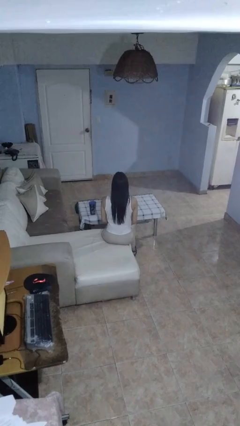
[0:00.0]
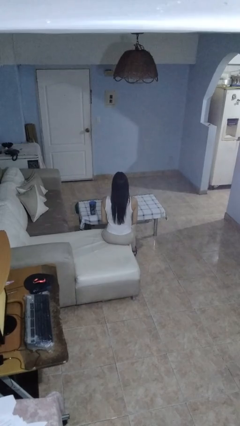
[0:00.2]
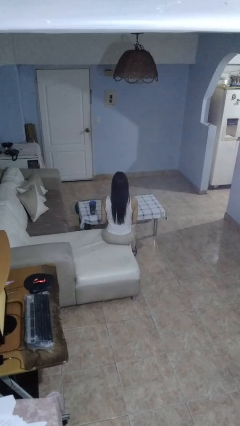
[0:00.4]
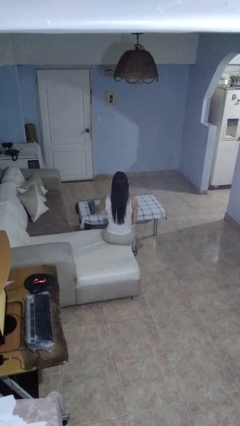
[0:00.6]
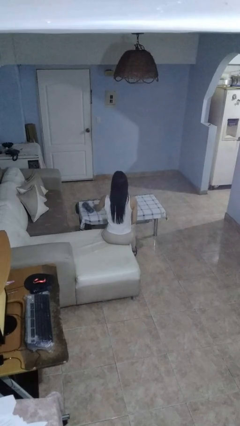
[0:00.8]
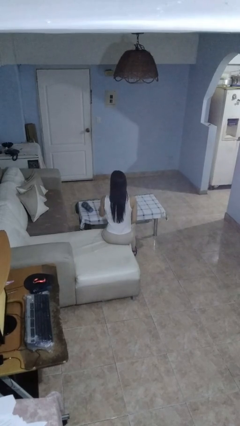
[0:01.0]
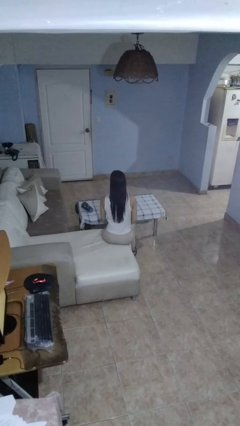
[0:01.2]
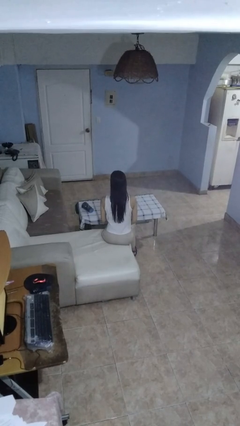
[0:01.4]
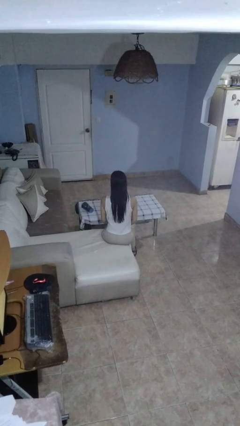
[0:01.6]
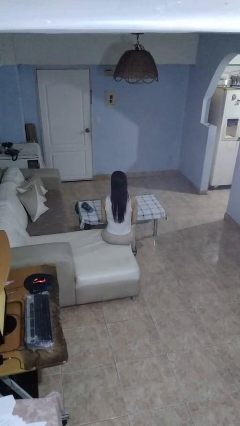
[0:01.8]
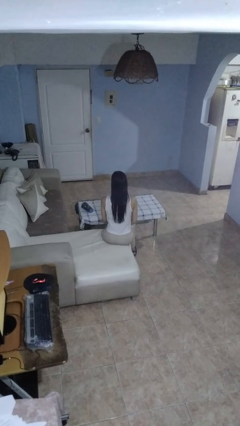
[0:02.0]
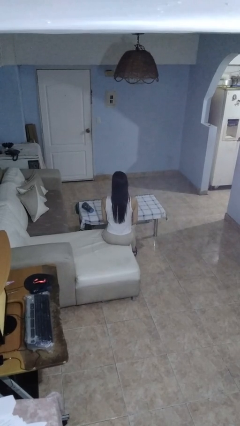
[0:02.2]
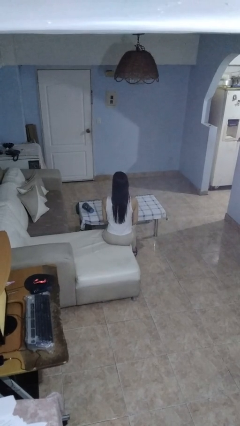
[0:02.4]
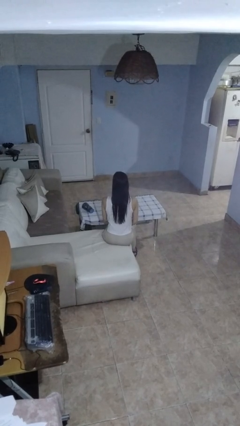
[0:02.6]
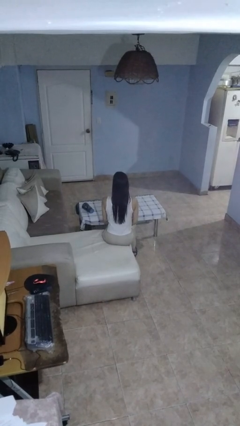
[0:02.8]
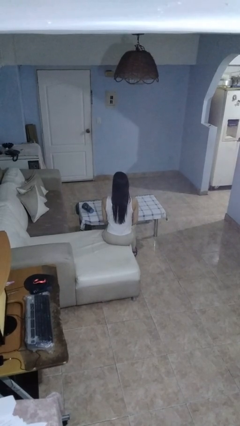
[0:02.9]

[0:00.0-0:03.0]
person knocks over glass

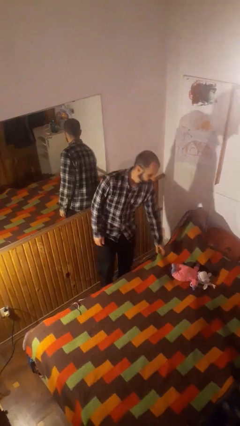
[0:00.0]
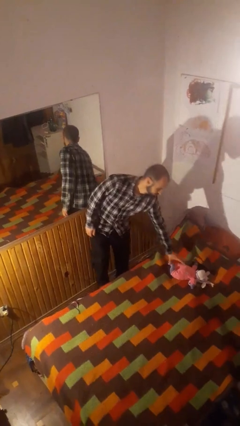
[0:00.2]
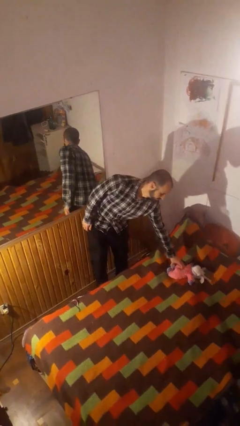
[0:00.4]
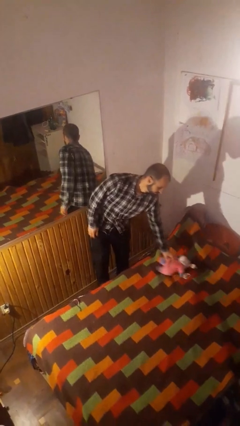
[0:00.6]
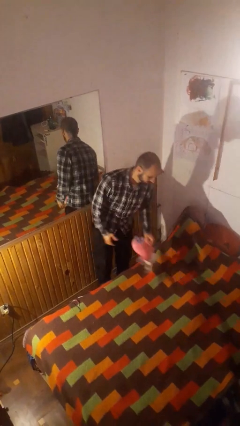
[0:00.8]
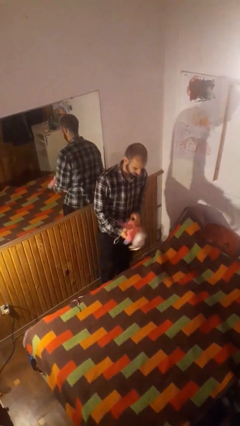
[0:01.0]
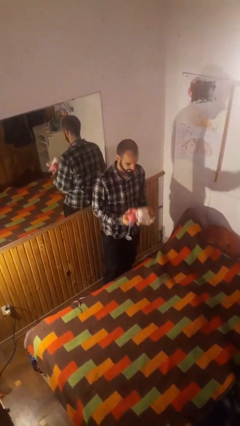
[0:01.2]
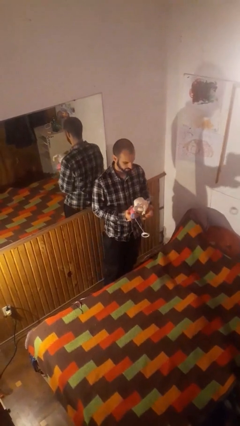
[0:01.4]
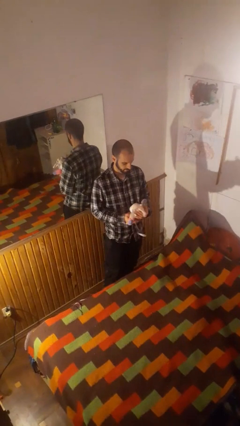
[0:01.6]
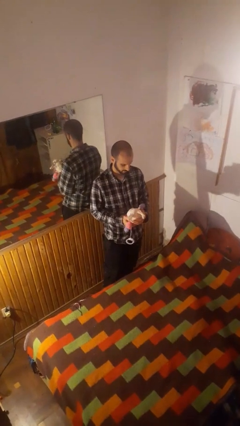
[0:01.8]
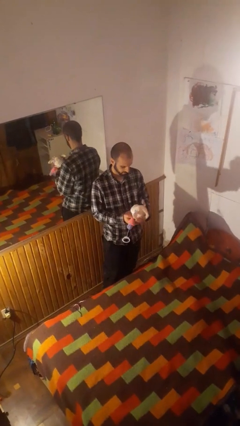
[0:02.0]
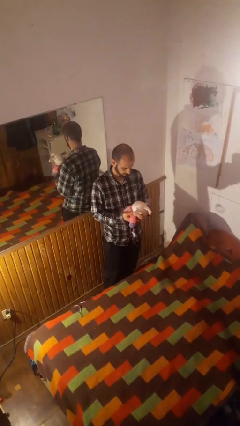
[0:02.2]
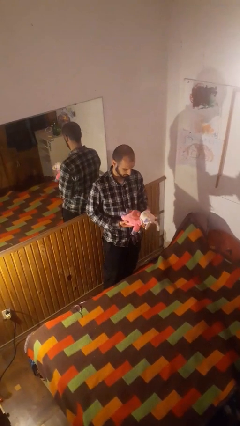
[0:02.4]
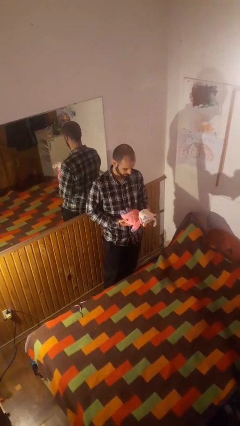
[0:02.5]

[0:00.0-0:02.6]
person picks up object from bed

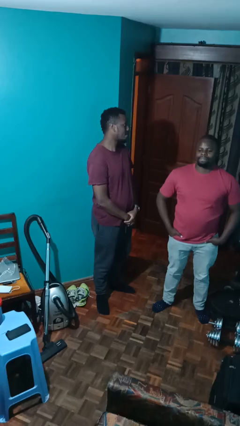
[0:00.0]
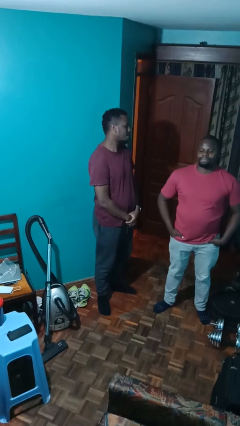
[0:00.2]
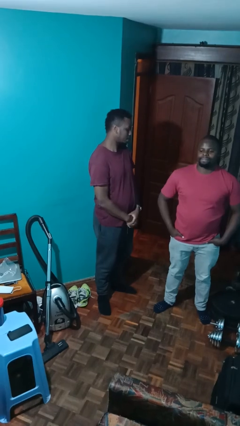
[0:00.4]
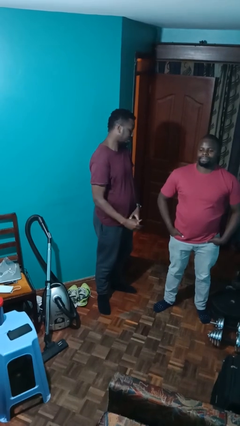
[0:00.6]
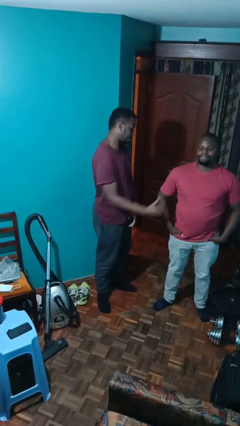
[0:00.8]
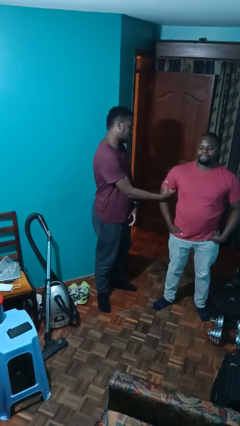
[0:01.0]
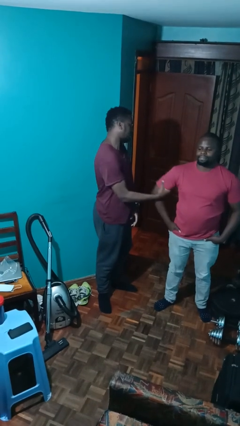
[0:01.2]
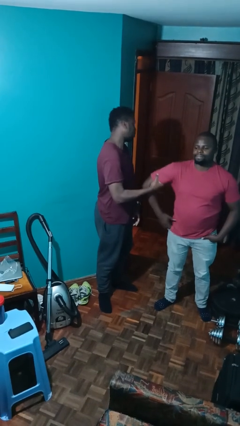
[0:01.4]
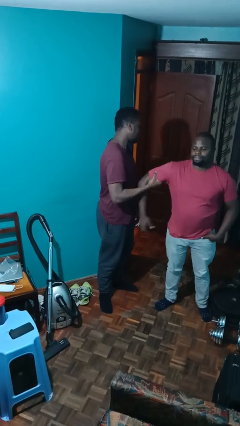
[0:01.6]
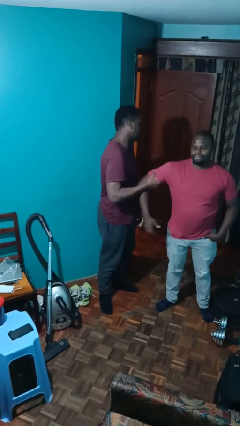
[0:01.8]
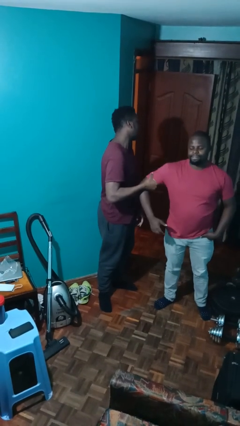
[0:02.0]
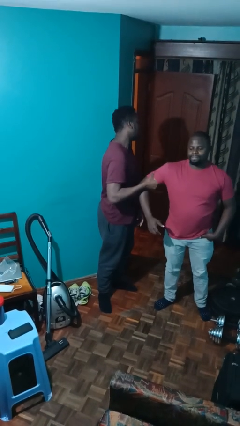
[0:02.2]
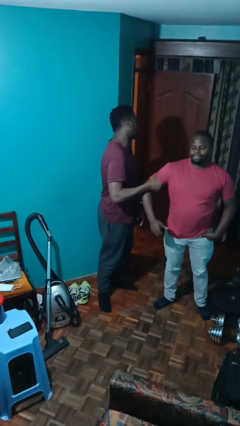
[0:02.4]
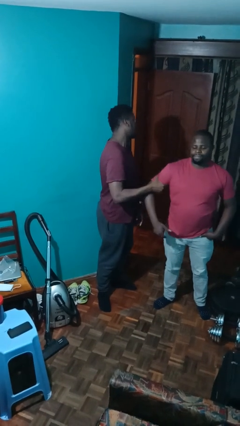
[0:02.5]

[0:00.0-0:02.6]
person grabs person by bicep

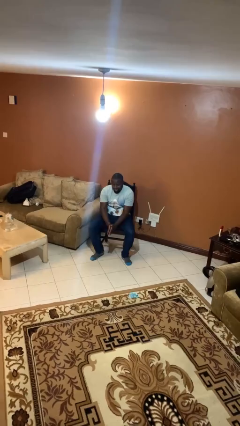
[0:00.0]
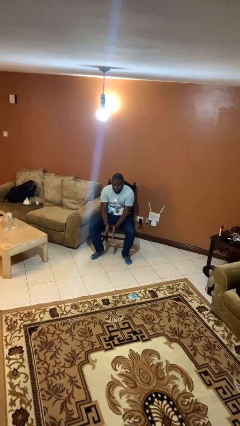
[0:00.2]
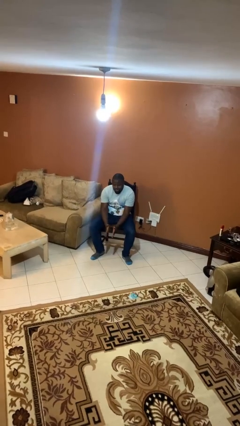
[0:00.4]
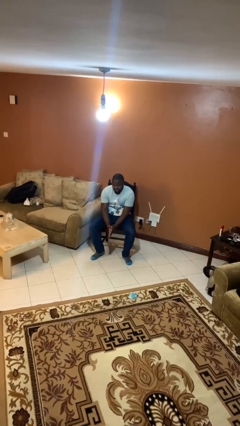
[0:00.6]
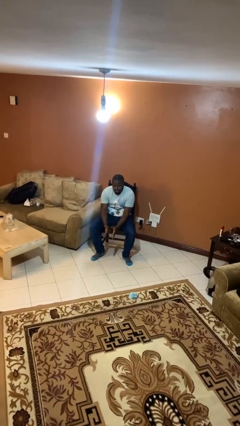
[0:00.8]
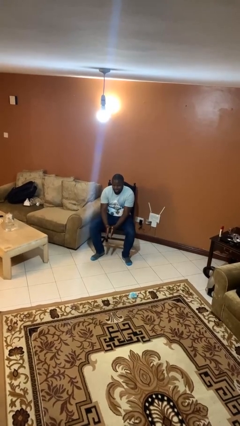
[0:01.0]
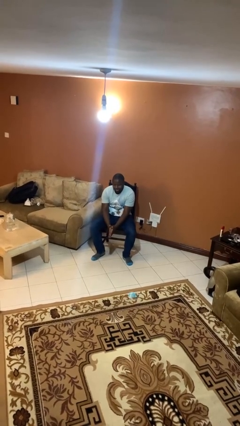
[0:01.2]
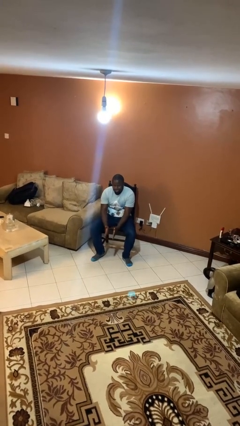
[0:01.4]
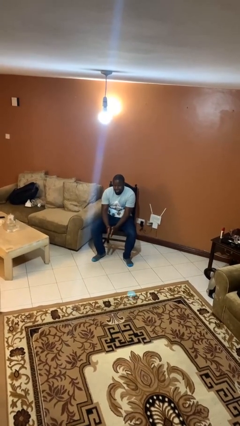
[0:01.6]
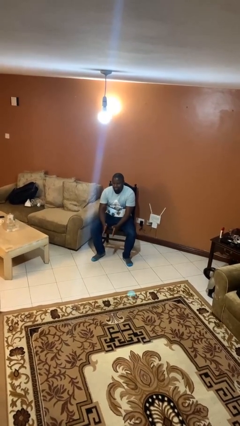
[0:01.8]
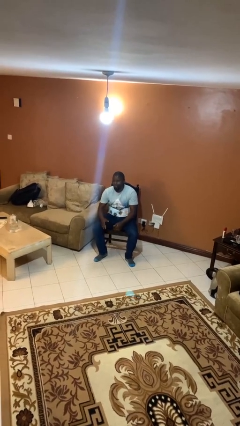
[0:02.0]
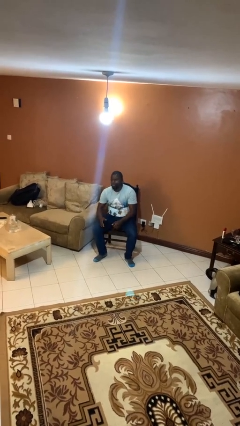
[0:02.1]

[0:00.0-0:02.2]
person claps hands

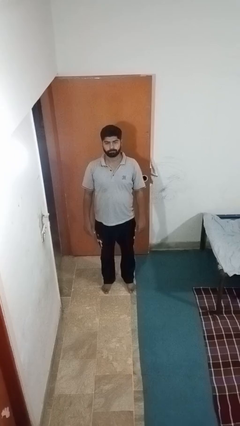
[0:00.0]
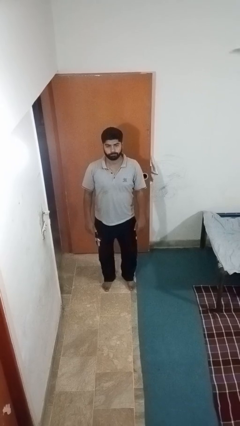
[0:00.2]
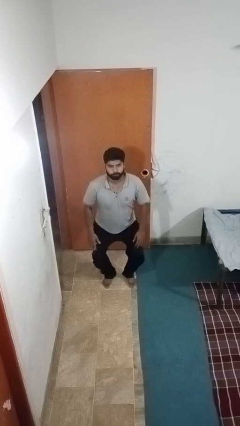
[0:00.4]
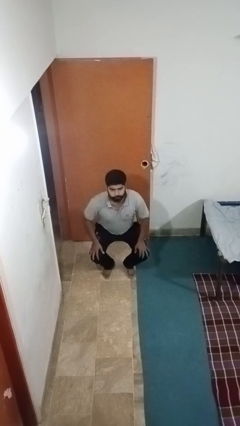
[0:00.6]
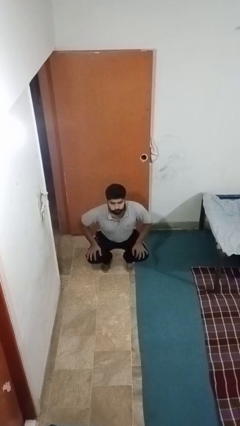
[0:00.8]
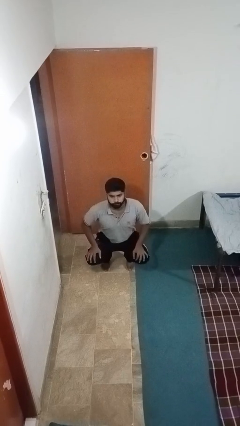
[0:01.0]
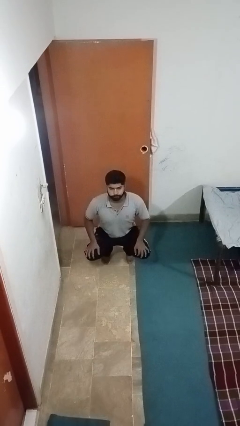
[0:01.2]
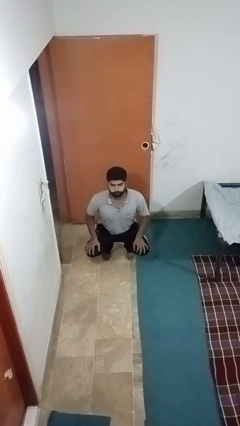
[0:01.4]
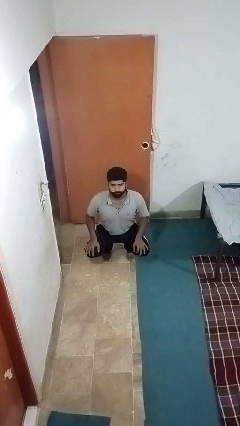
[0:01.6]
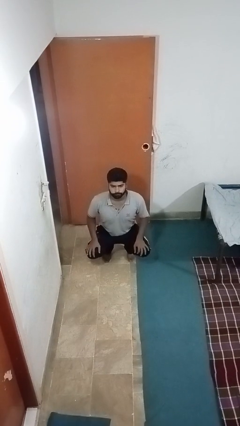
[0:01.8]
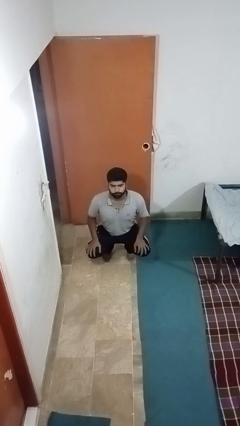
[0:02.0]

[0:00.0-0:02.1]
person squats

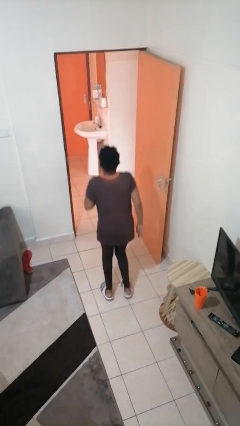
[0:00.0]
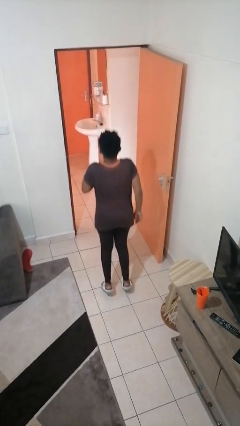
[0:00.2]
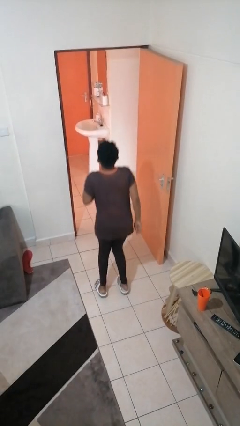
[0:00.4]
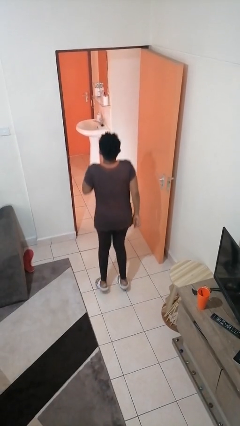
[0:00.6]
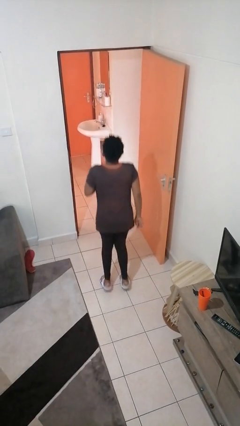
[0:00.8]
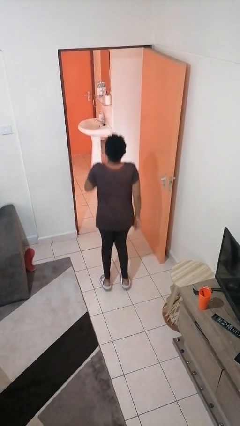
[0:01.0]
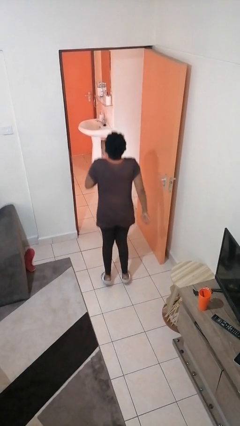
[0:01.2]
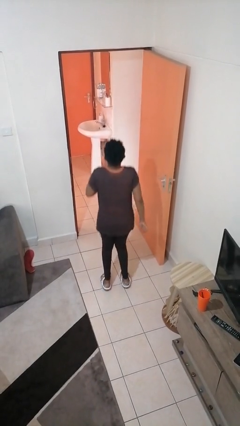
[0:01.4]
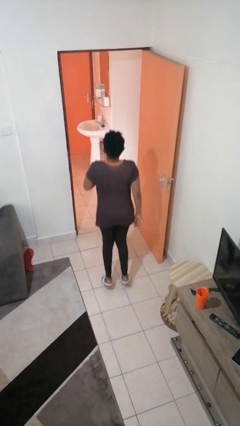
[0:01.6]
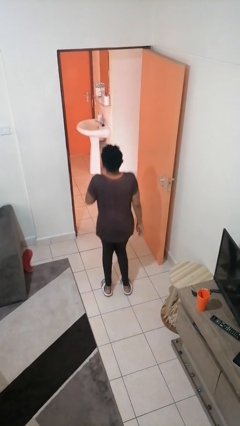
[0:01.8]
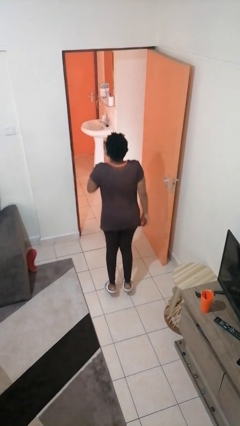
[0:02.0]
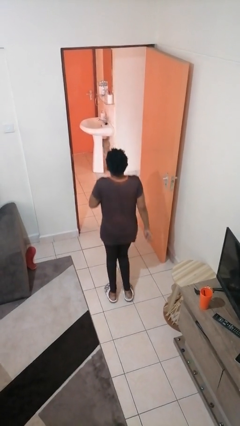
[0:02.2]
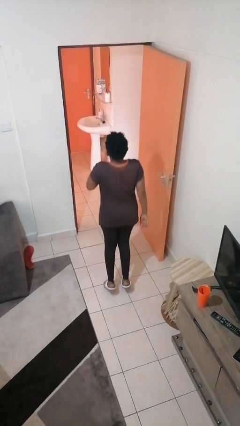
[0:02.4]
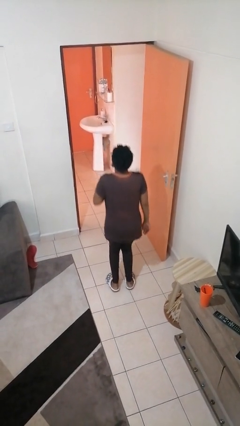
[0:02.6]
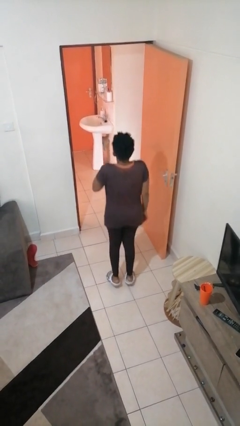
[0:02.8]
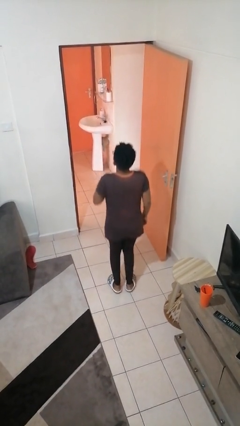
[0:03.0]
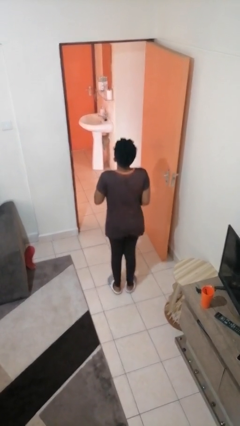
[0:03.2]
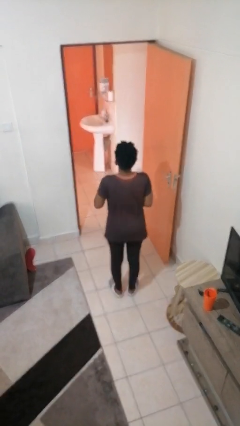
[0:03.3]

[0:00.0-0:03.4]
person jumps

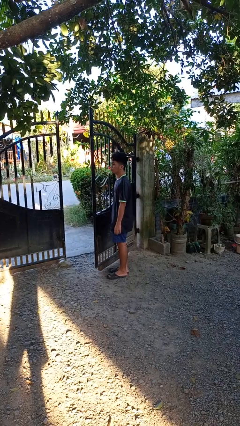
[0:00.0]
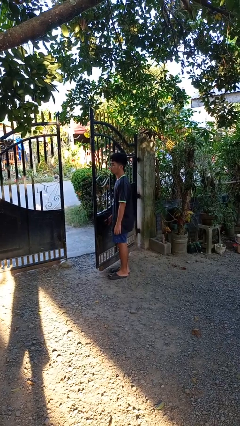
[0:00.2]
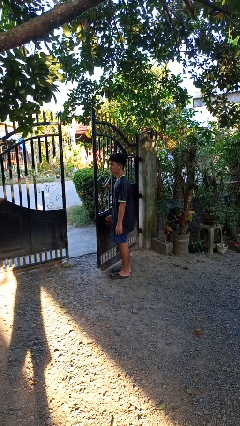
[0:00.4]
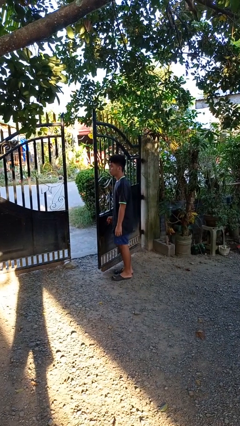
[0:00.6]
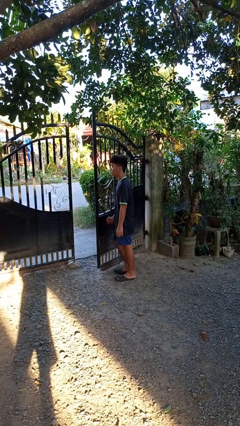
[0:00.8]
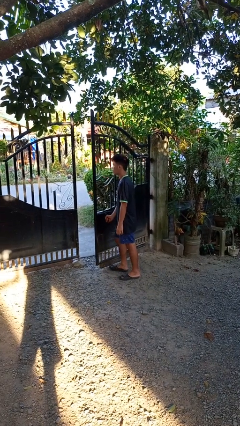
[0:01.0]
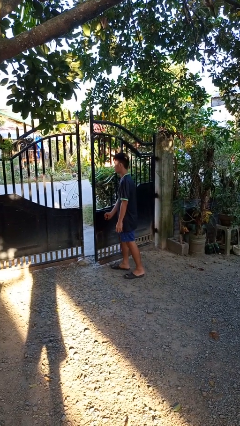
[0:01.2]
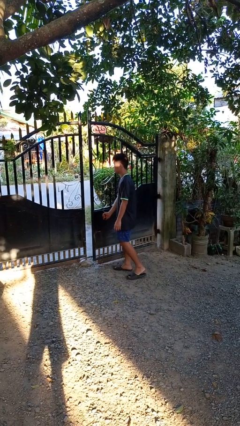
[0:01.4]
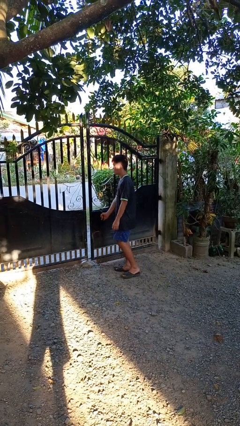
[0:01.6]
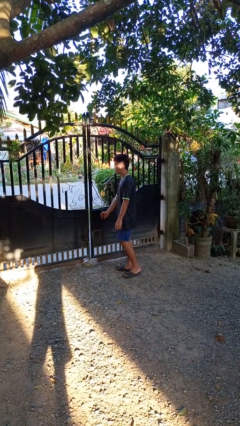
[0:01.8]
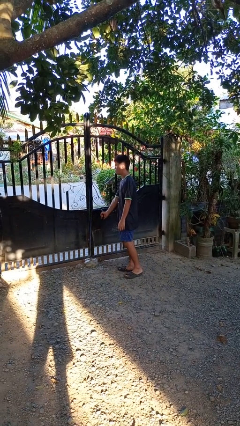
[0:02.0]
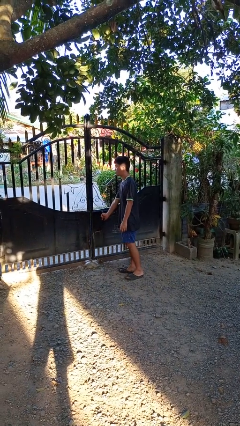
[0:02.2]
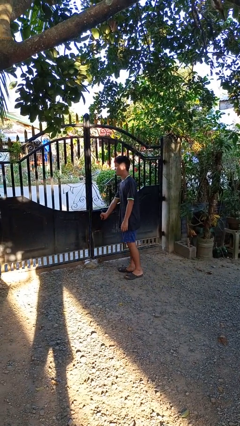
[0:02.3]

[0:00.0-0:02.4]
person closes gate
